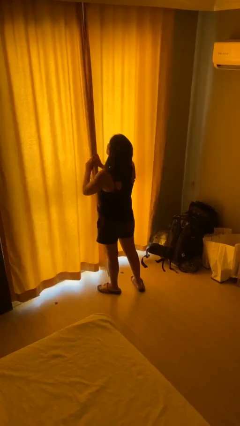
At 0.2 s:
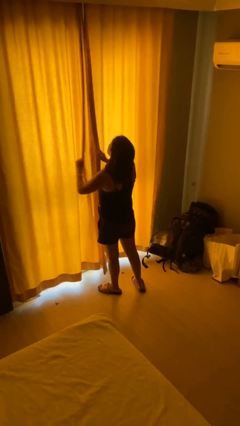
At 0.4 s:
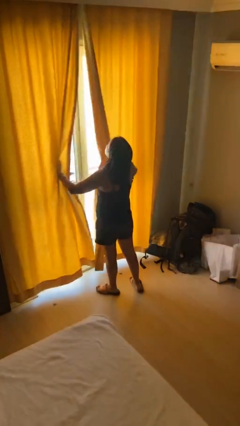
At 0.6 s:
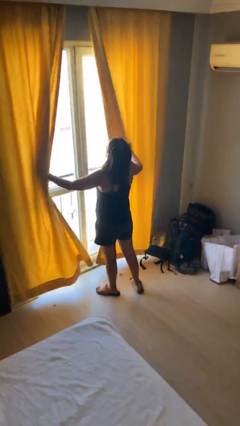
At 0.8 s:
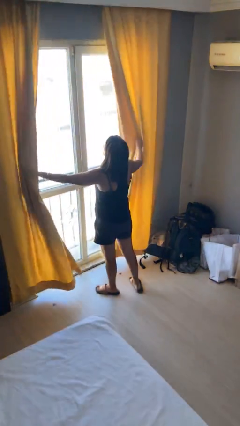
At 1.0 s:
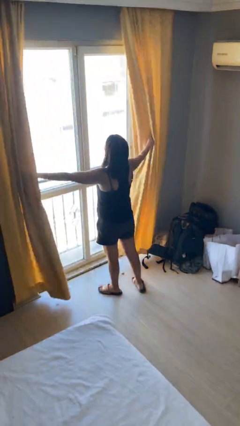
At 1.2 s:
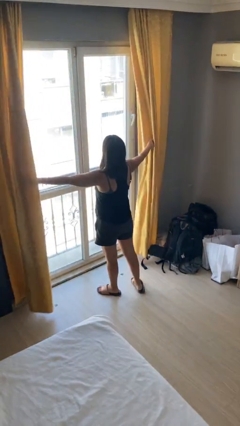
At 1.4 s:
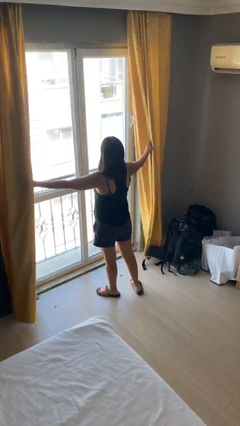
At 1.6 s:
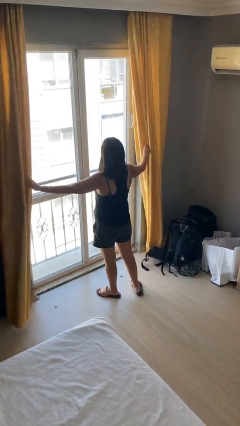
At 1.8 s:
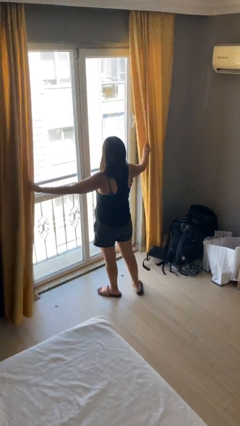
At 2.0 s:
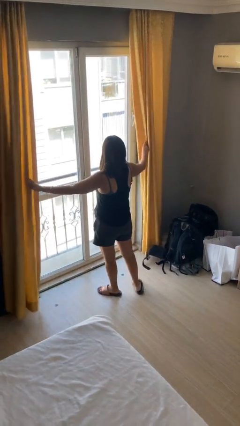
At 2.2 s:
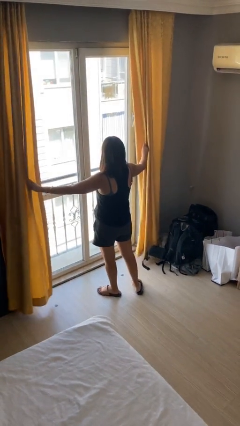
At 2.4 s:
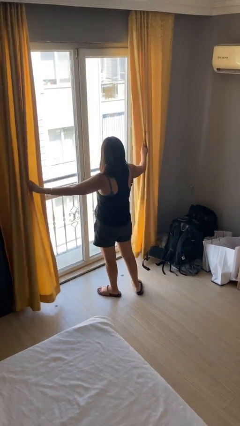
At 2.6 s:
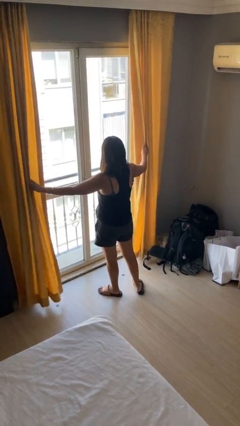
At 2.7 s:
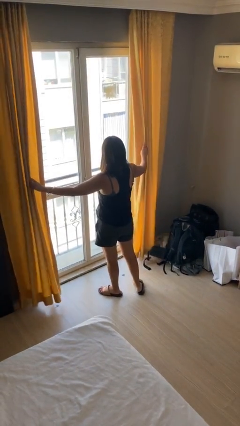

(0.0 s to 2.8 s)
person opens curtains

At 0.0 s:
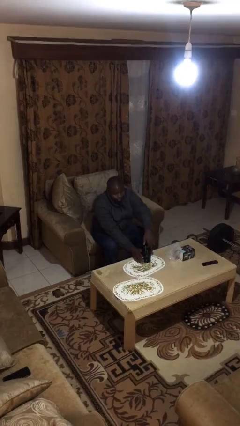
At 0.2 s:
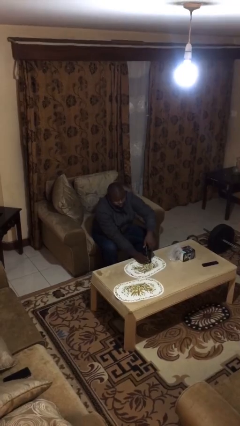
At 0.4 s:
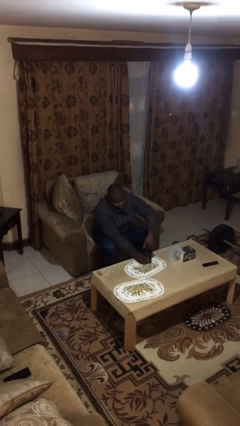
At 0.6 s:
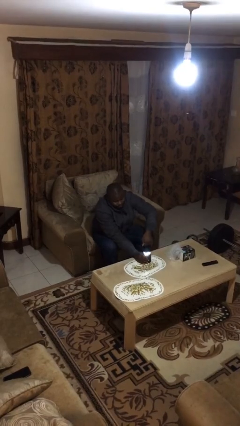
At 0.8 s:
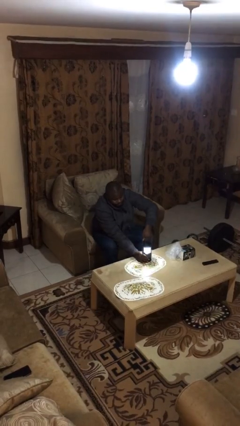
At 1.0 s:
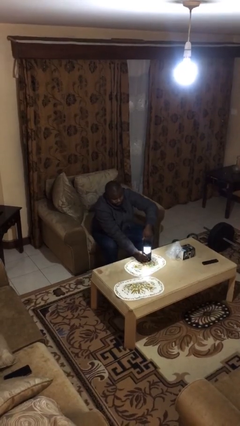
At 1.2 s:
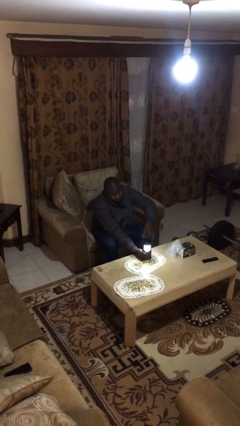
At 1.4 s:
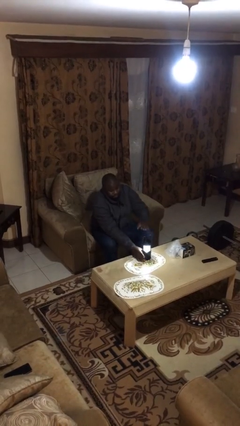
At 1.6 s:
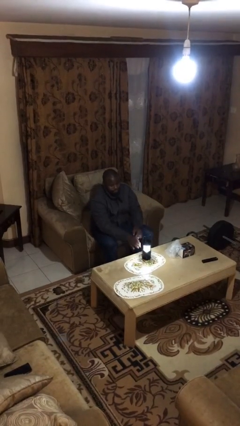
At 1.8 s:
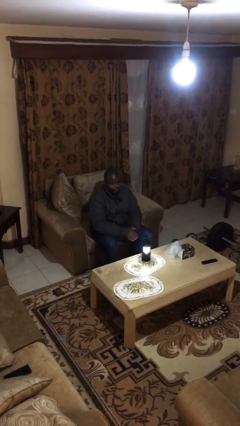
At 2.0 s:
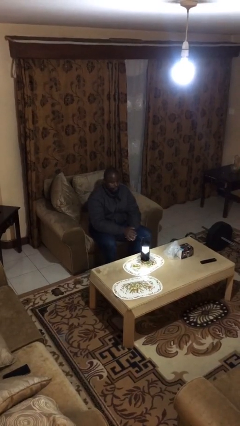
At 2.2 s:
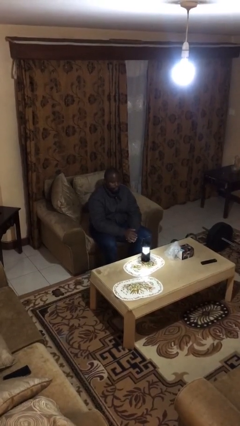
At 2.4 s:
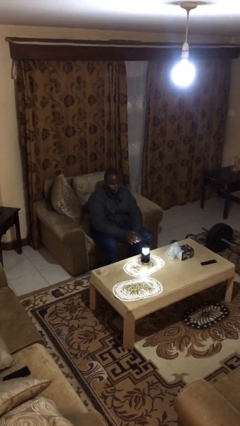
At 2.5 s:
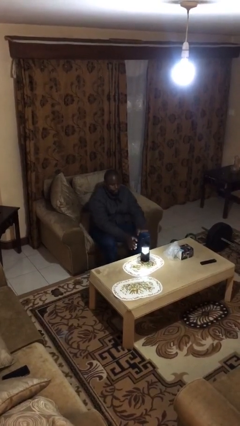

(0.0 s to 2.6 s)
person turns on lamp

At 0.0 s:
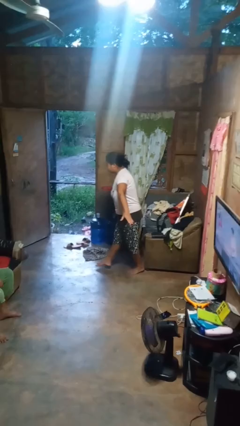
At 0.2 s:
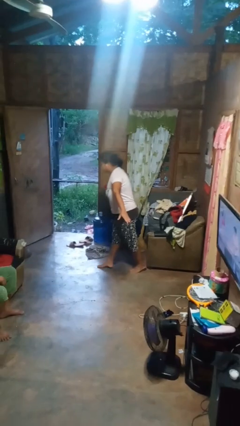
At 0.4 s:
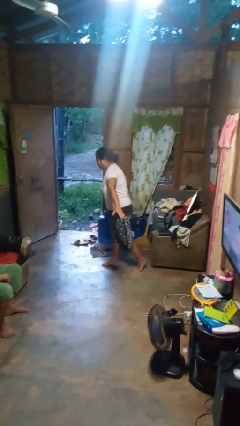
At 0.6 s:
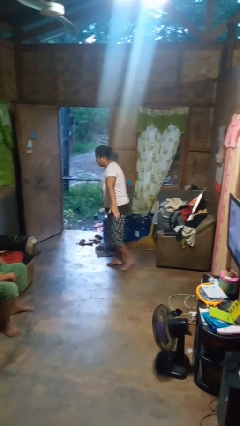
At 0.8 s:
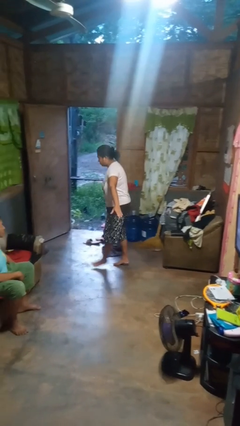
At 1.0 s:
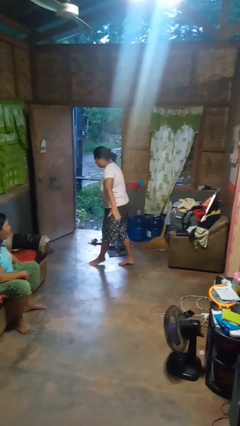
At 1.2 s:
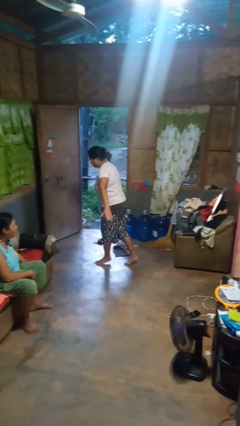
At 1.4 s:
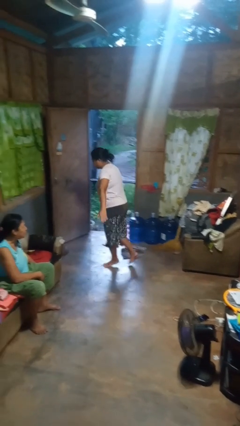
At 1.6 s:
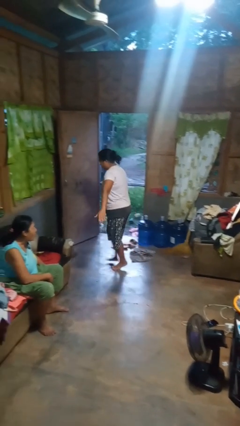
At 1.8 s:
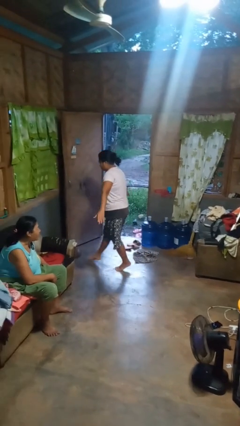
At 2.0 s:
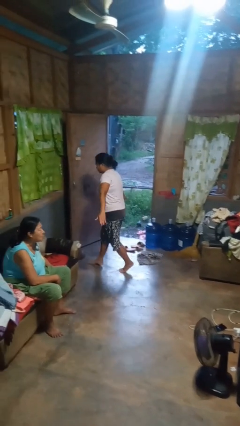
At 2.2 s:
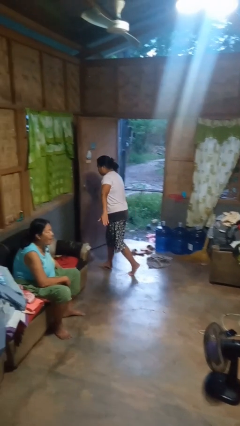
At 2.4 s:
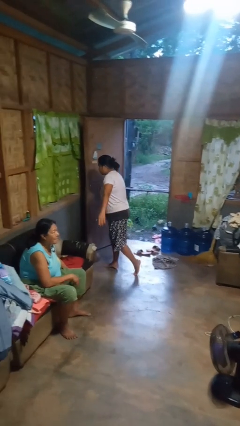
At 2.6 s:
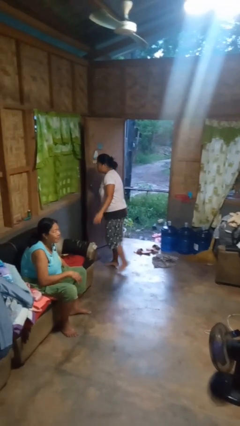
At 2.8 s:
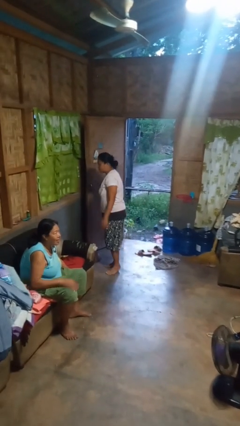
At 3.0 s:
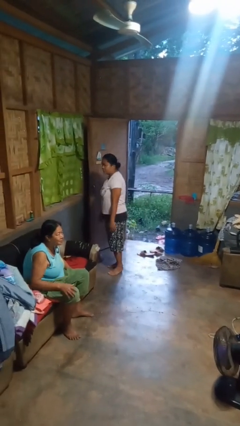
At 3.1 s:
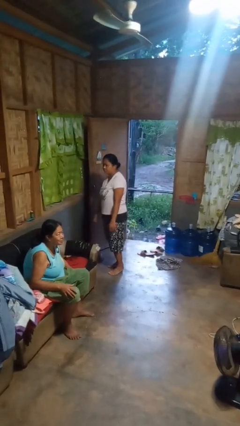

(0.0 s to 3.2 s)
person walks tiptoe

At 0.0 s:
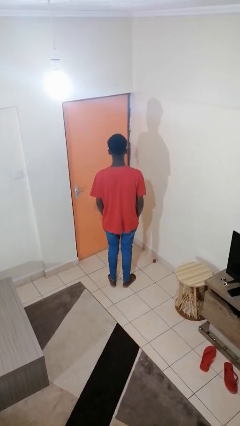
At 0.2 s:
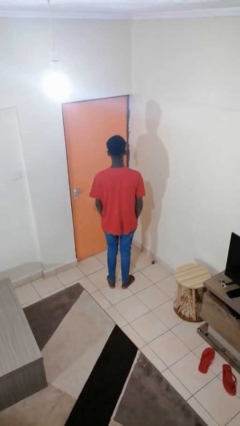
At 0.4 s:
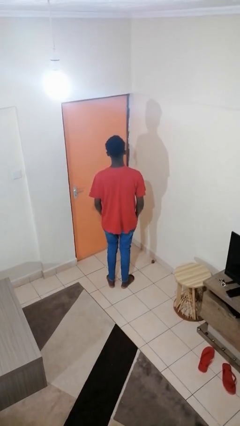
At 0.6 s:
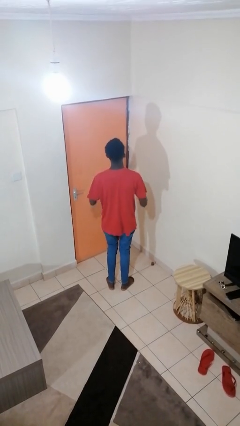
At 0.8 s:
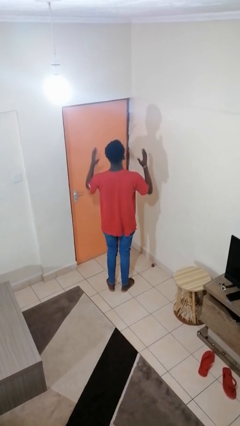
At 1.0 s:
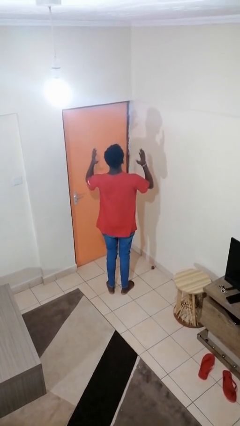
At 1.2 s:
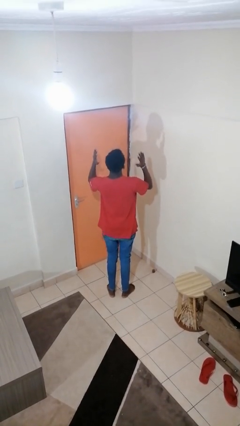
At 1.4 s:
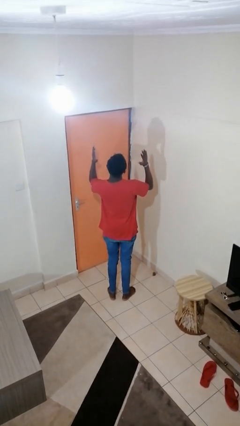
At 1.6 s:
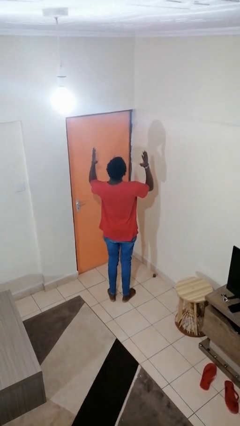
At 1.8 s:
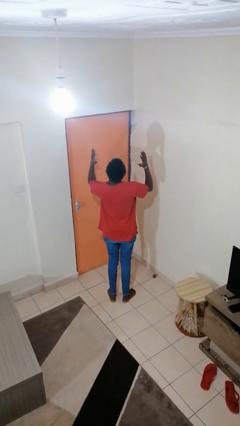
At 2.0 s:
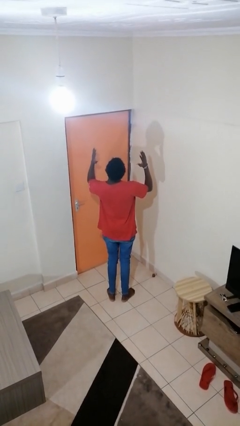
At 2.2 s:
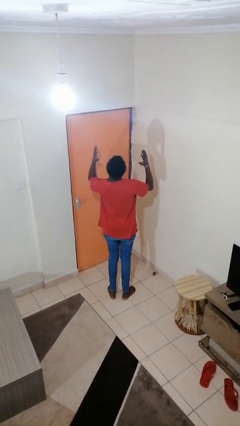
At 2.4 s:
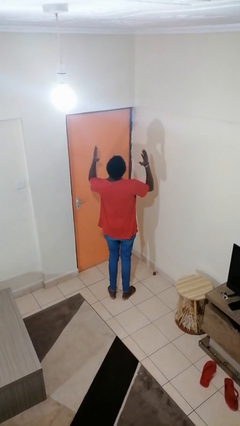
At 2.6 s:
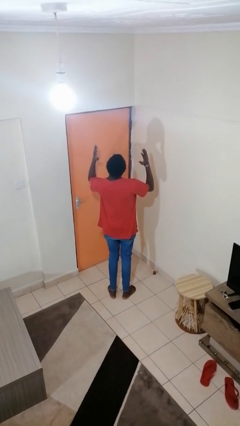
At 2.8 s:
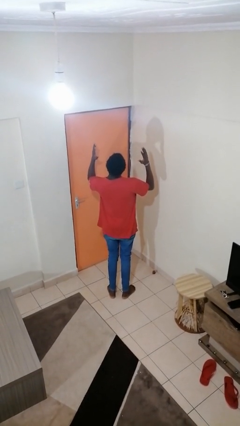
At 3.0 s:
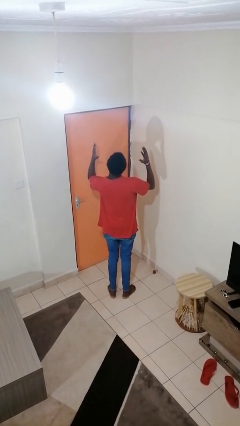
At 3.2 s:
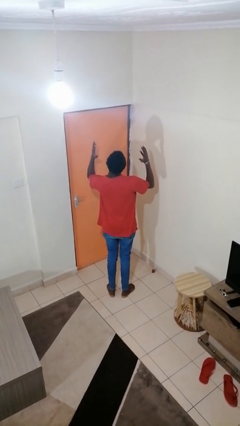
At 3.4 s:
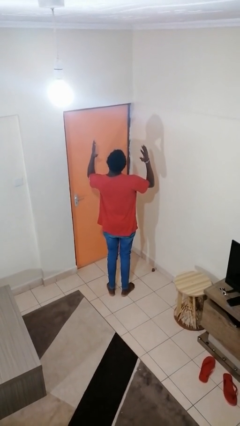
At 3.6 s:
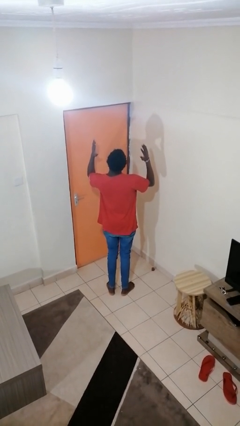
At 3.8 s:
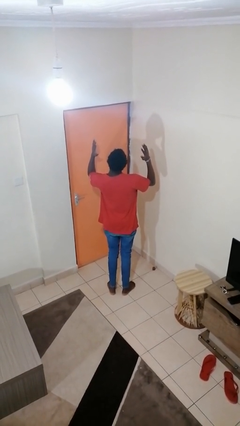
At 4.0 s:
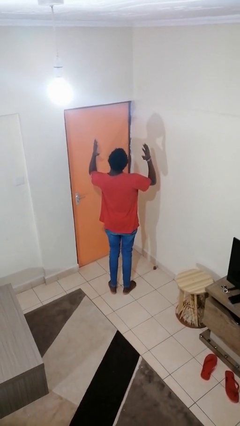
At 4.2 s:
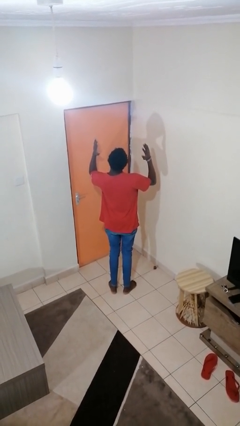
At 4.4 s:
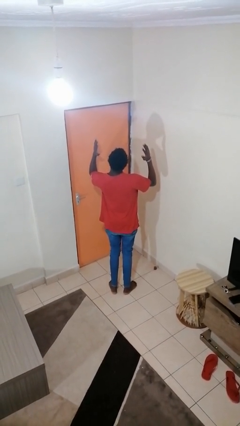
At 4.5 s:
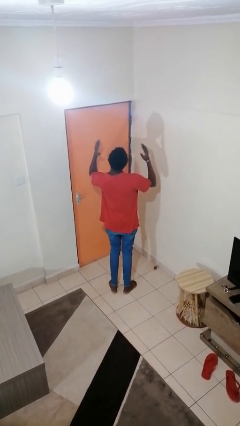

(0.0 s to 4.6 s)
person prays

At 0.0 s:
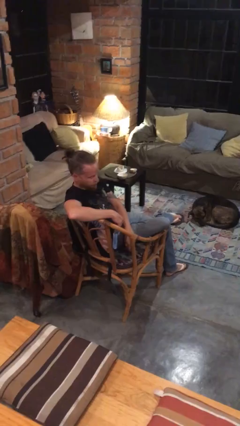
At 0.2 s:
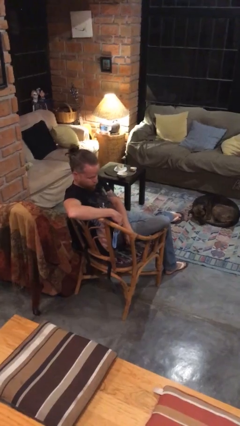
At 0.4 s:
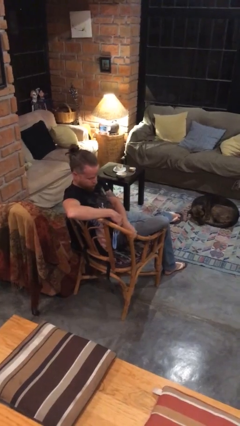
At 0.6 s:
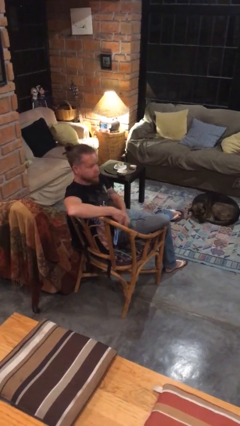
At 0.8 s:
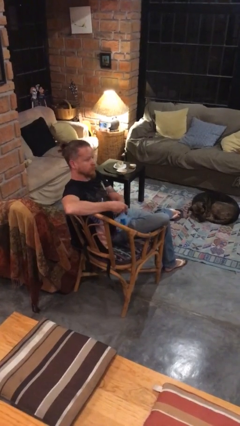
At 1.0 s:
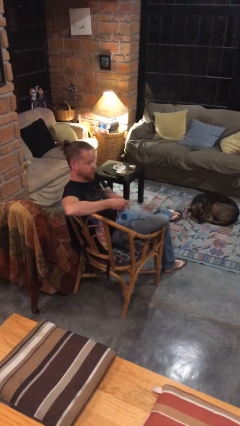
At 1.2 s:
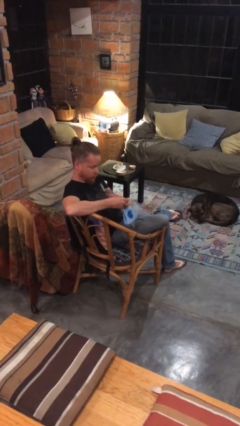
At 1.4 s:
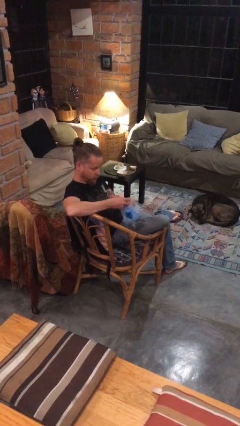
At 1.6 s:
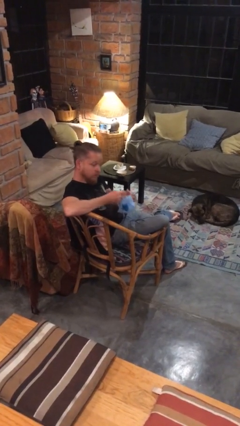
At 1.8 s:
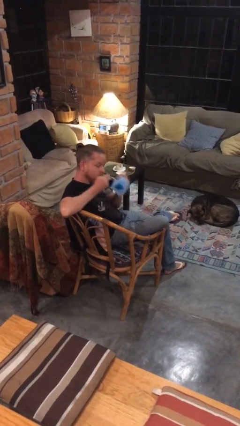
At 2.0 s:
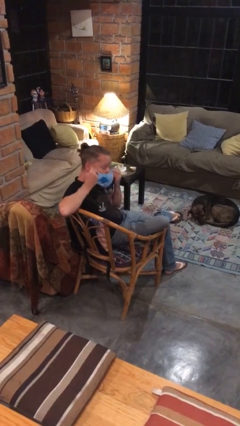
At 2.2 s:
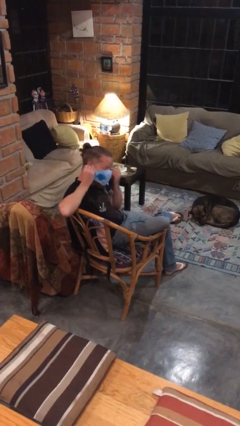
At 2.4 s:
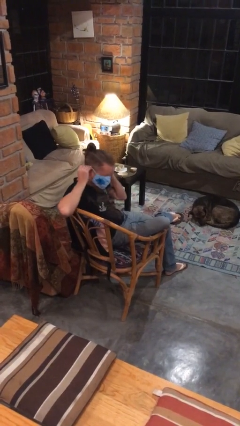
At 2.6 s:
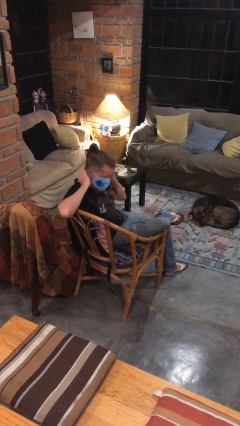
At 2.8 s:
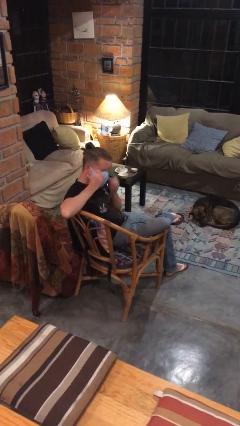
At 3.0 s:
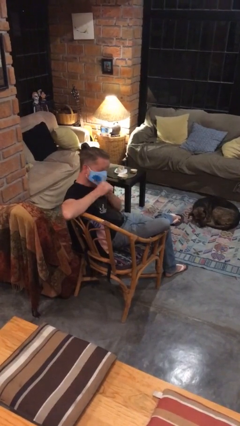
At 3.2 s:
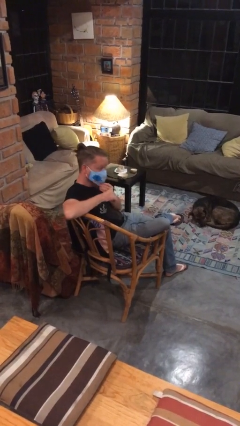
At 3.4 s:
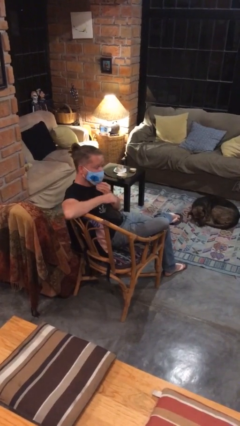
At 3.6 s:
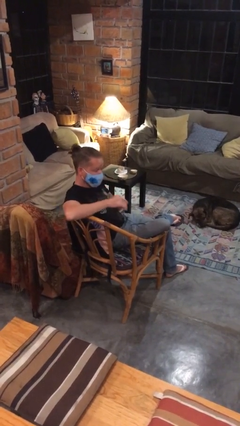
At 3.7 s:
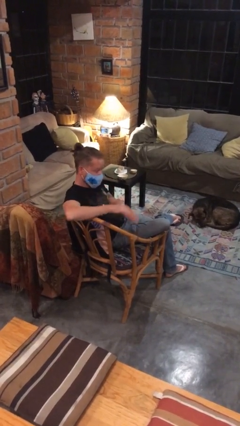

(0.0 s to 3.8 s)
person puts on facemask

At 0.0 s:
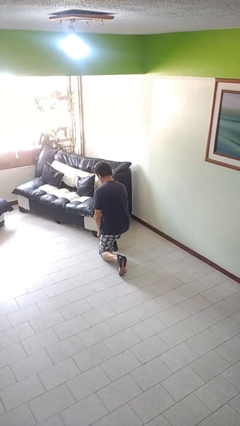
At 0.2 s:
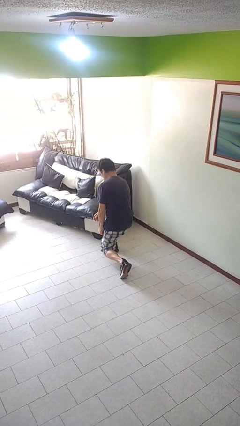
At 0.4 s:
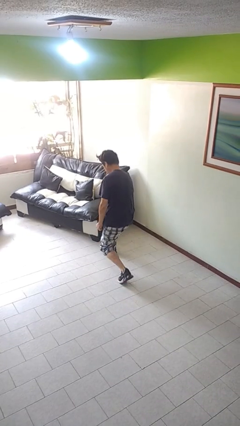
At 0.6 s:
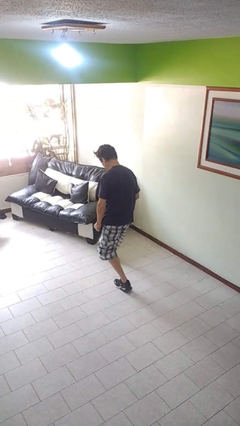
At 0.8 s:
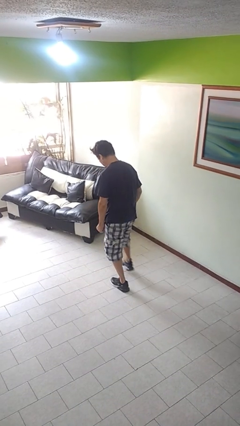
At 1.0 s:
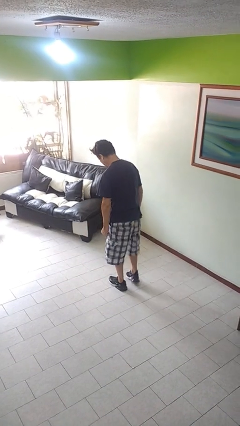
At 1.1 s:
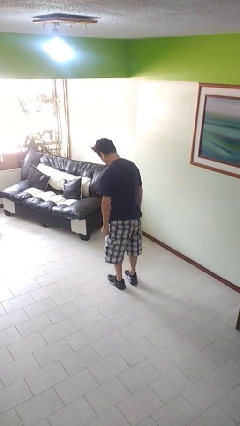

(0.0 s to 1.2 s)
person stands up from floor
